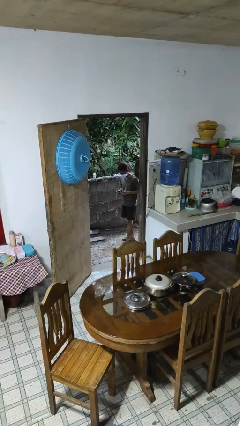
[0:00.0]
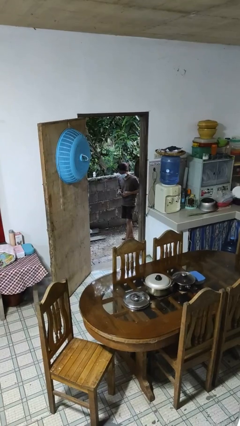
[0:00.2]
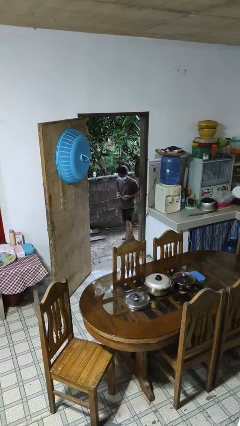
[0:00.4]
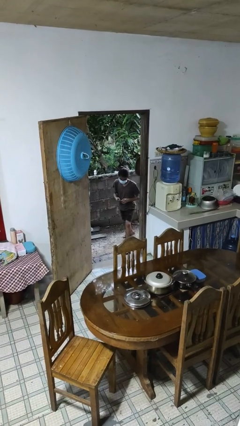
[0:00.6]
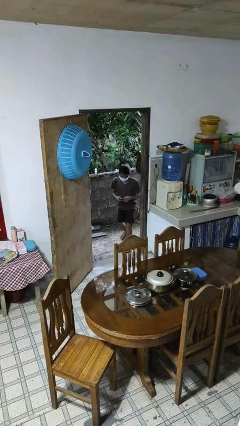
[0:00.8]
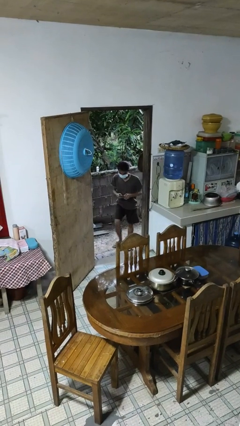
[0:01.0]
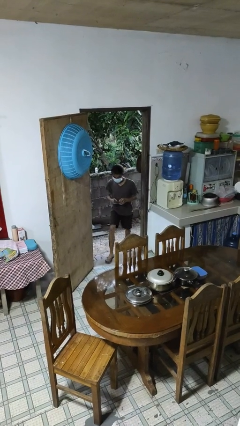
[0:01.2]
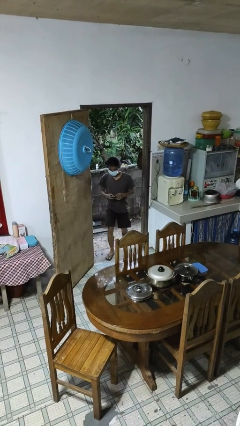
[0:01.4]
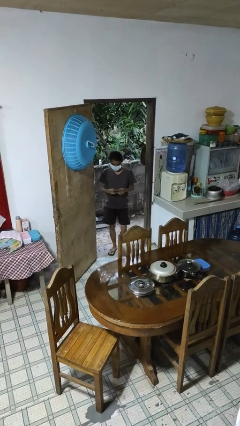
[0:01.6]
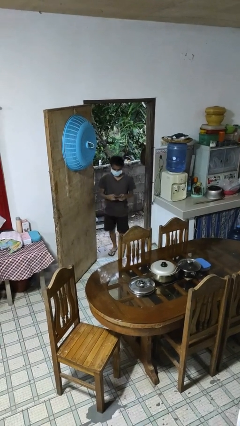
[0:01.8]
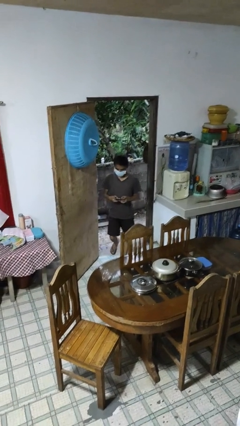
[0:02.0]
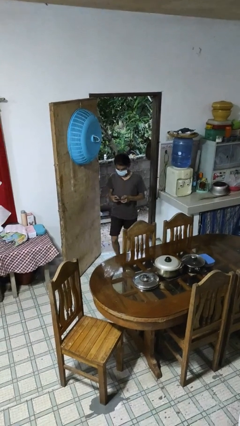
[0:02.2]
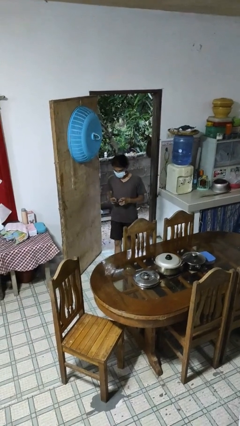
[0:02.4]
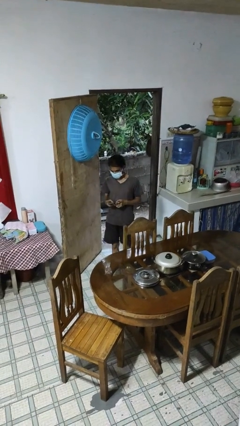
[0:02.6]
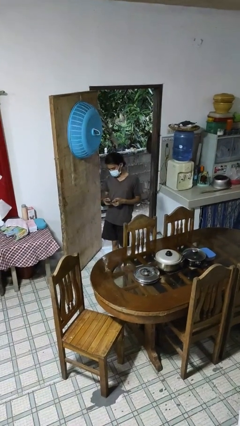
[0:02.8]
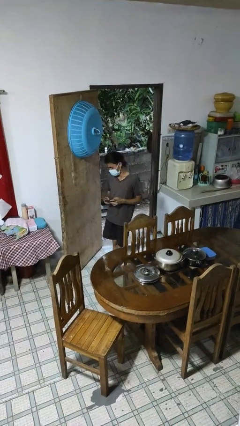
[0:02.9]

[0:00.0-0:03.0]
person enters scene through structure

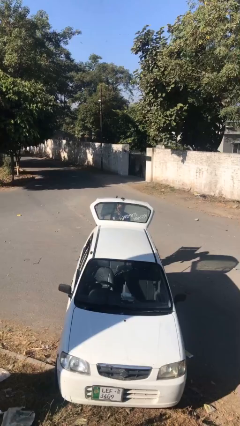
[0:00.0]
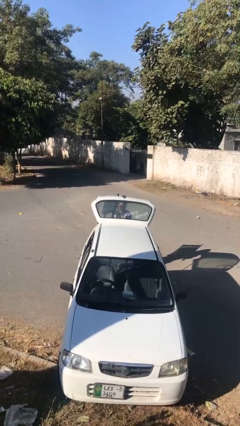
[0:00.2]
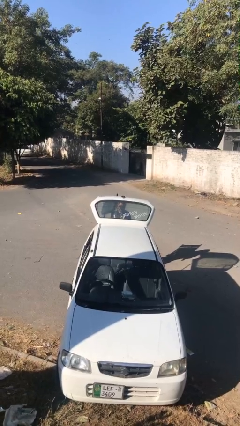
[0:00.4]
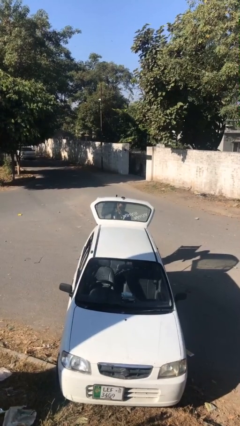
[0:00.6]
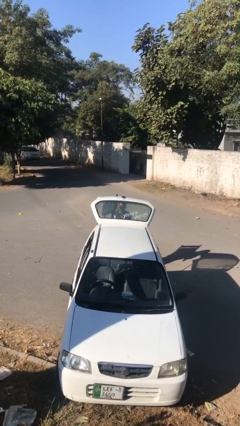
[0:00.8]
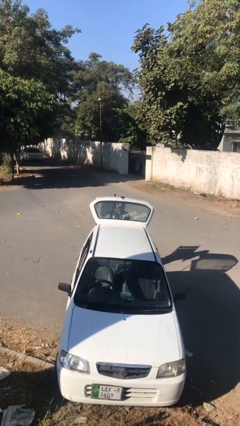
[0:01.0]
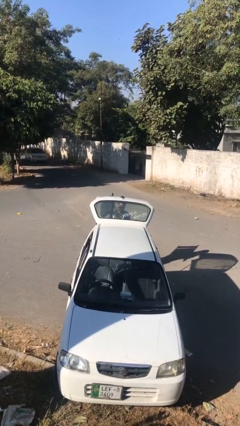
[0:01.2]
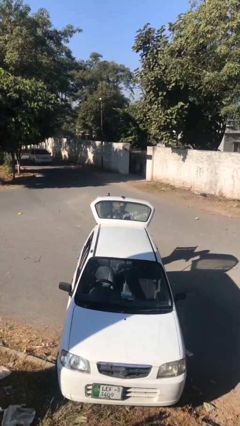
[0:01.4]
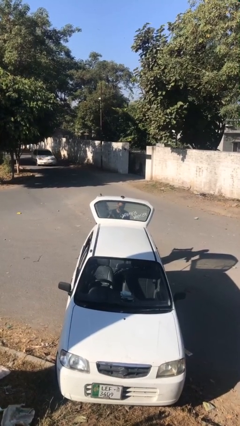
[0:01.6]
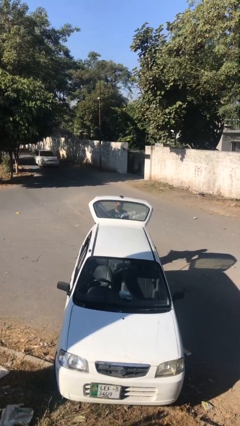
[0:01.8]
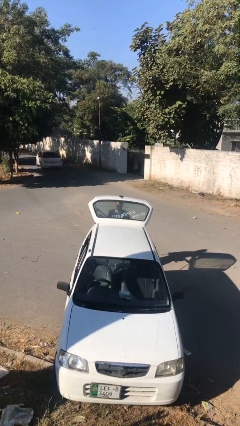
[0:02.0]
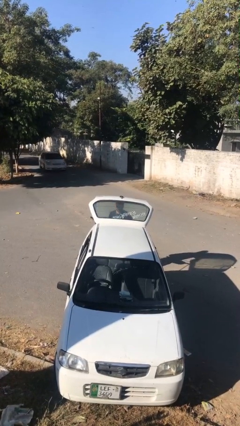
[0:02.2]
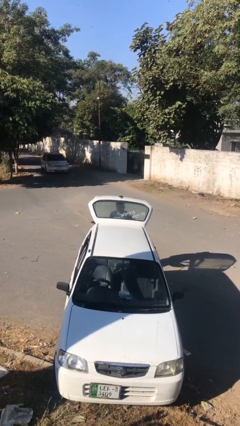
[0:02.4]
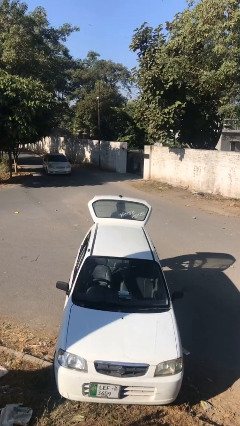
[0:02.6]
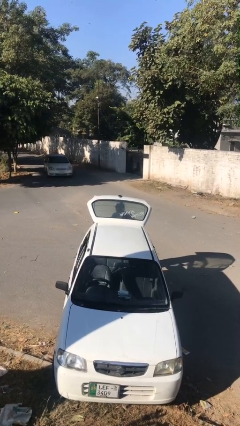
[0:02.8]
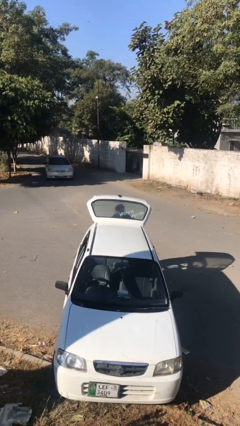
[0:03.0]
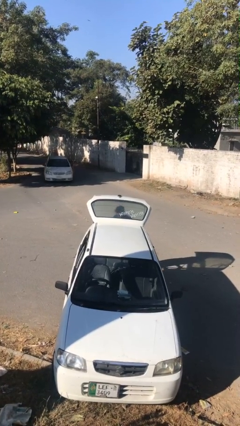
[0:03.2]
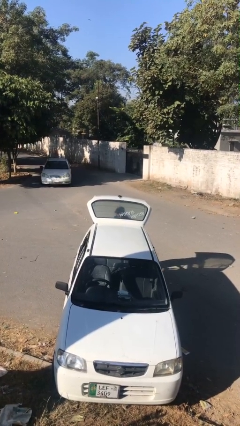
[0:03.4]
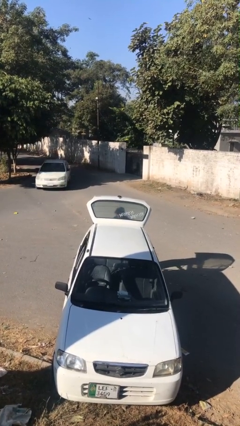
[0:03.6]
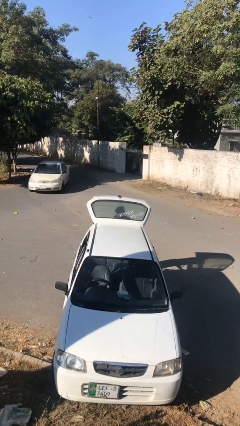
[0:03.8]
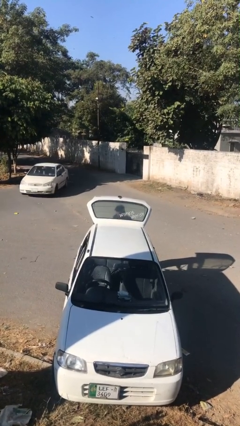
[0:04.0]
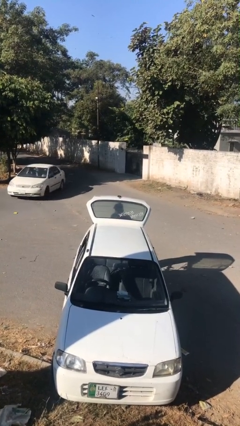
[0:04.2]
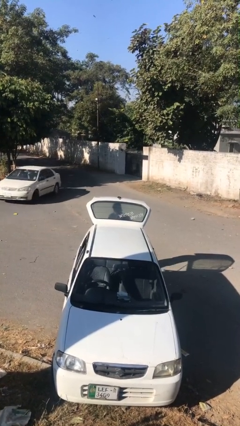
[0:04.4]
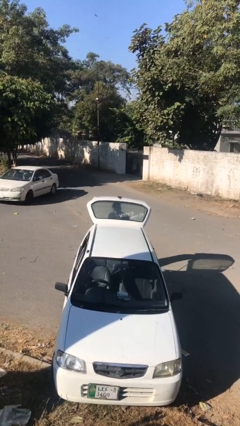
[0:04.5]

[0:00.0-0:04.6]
person loads car

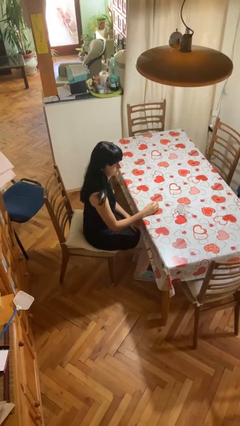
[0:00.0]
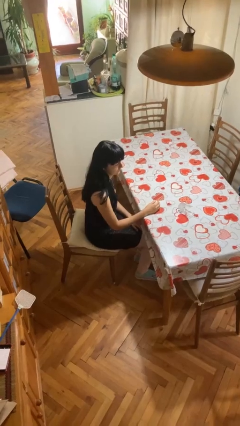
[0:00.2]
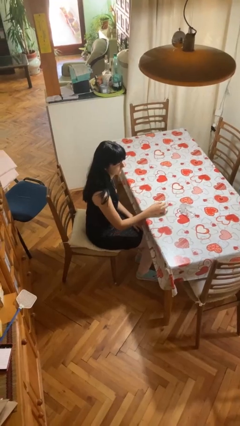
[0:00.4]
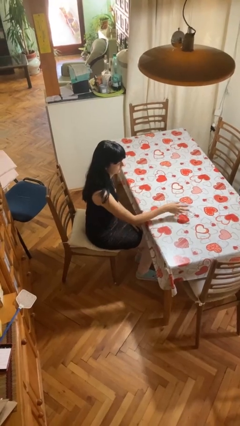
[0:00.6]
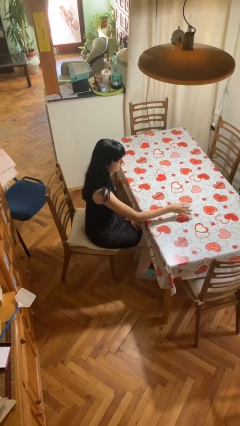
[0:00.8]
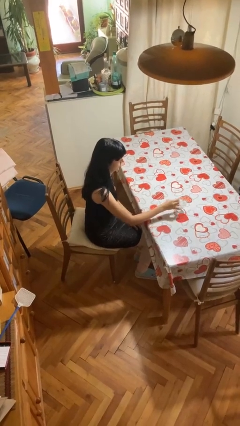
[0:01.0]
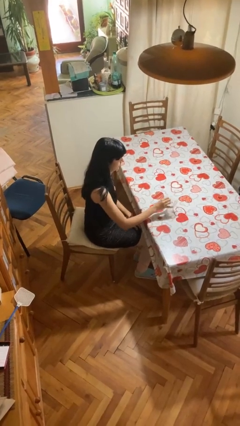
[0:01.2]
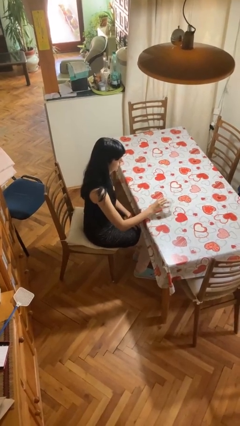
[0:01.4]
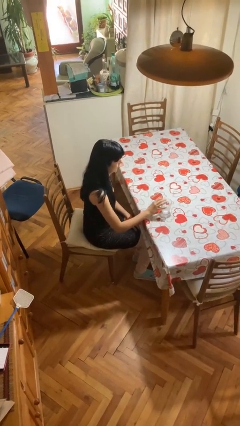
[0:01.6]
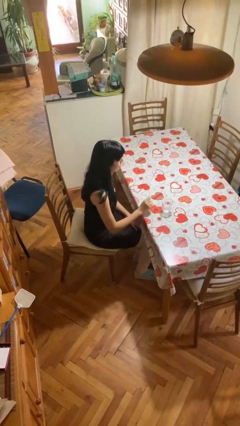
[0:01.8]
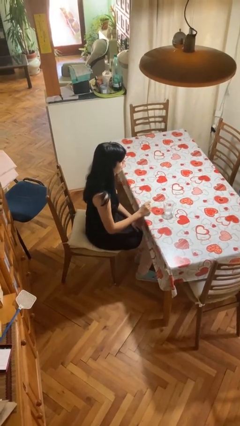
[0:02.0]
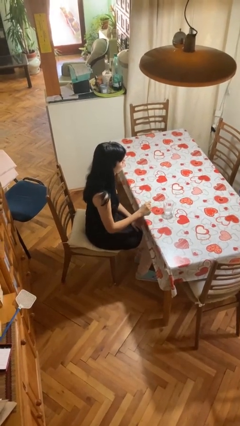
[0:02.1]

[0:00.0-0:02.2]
person sets upright glass

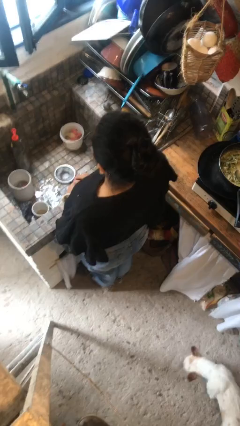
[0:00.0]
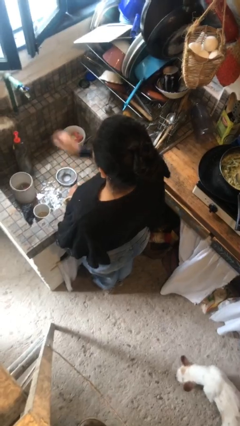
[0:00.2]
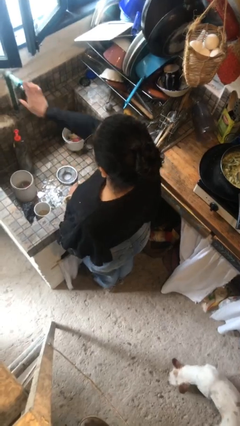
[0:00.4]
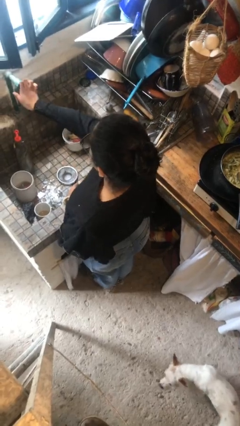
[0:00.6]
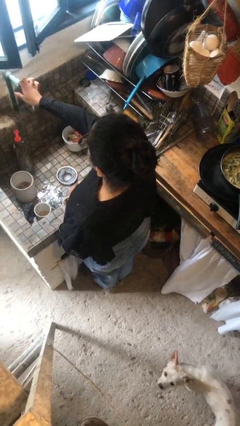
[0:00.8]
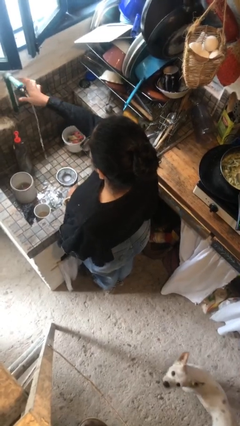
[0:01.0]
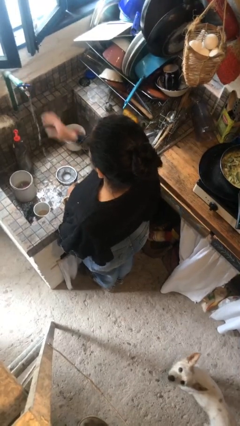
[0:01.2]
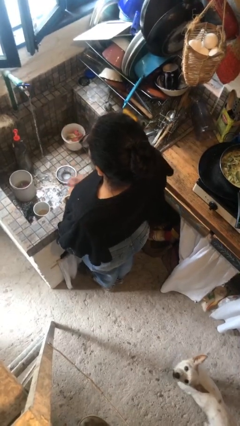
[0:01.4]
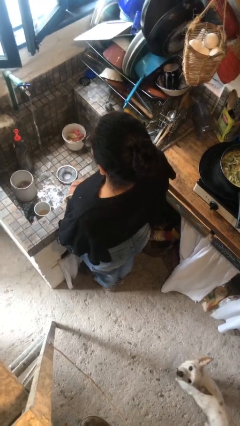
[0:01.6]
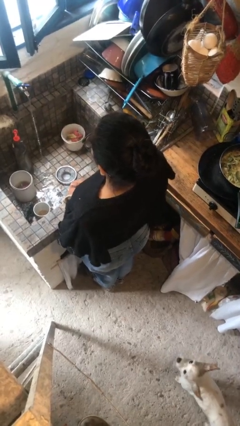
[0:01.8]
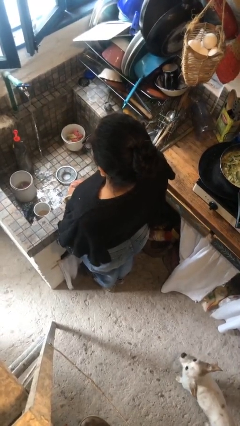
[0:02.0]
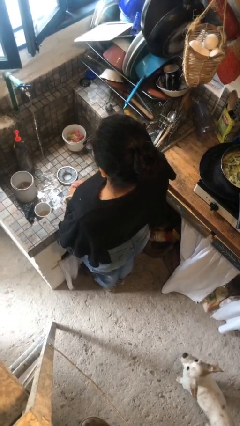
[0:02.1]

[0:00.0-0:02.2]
person turns on faucet

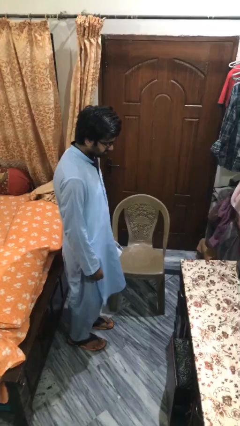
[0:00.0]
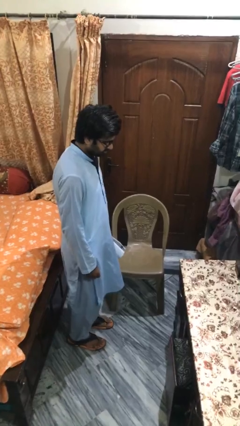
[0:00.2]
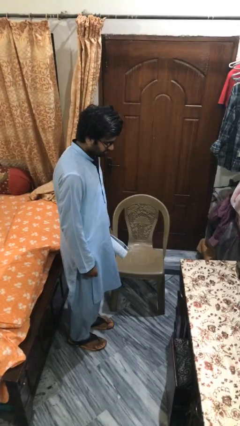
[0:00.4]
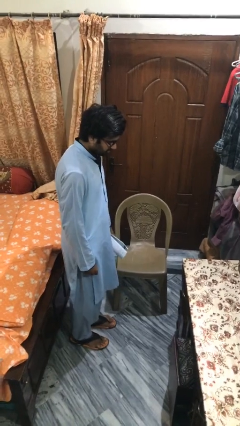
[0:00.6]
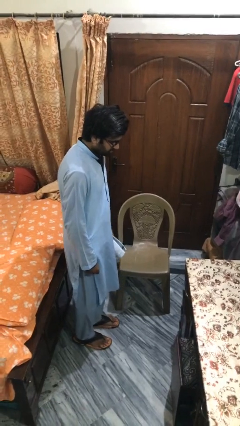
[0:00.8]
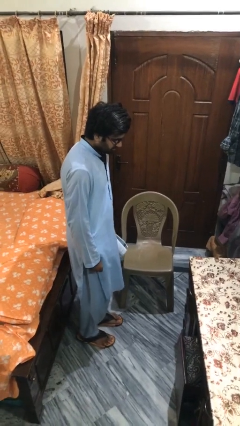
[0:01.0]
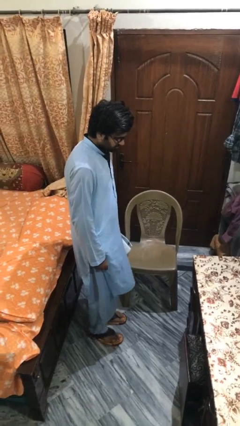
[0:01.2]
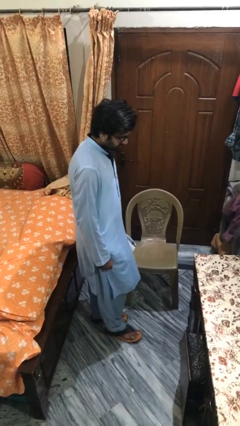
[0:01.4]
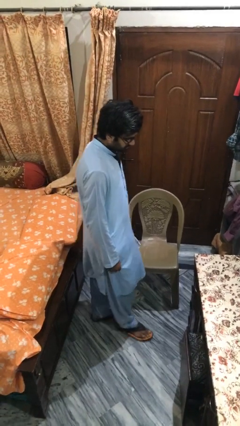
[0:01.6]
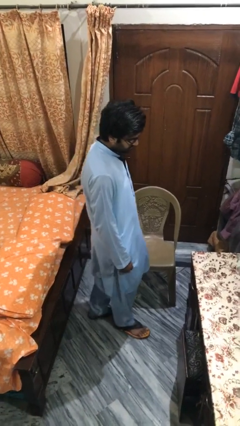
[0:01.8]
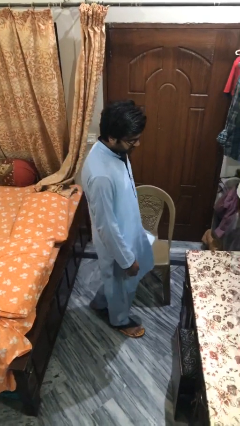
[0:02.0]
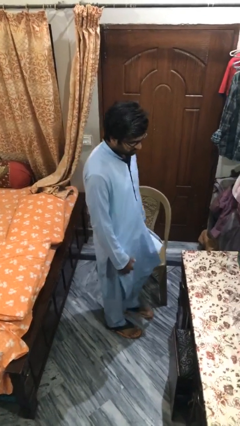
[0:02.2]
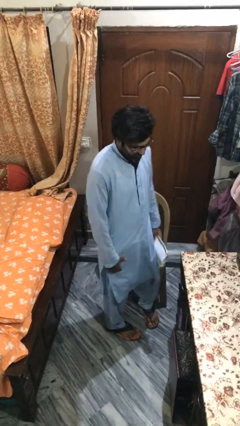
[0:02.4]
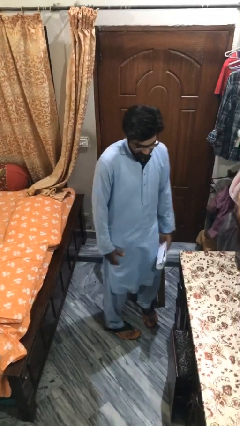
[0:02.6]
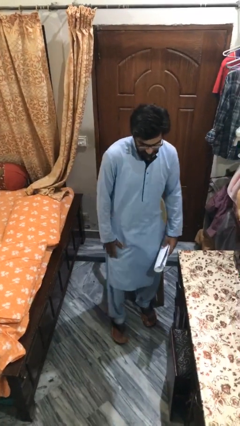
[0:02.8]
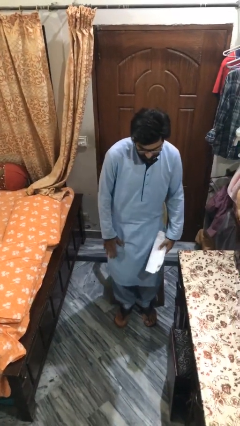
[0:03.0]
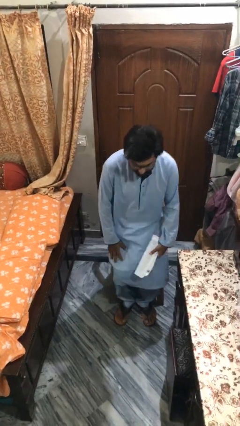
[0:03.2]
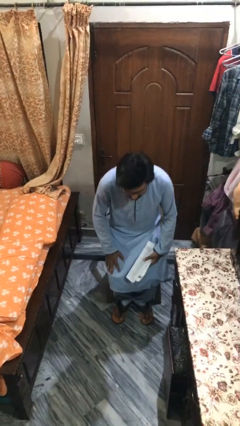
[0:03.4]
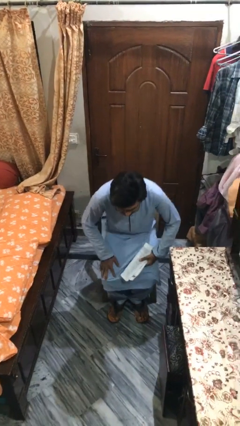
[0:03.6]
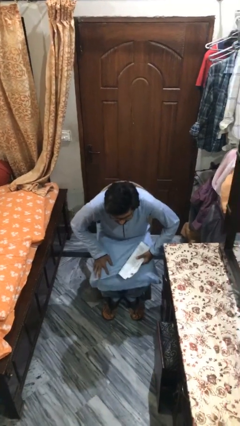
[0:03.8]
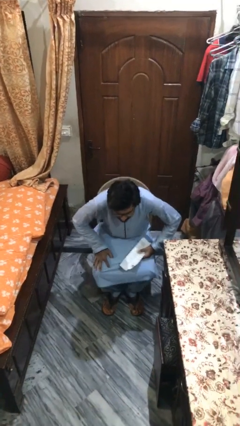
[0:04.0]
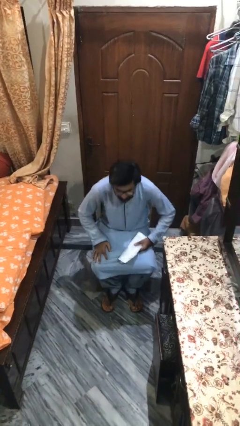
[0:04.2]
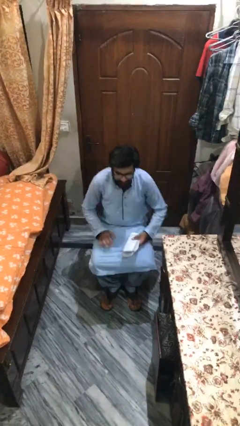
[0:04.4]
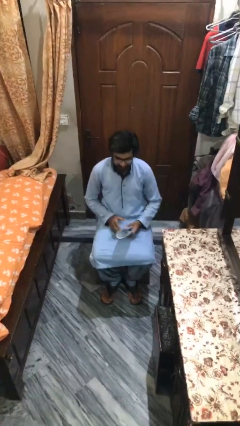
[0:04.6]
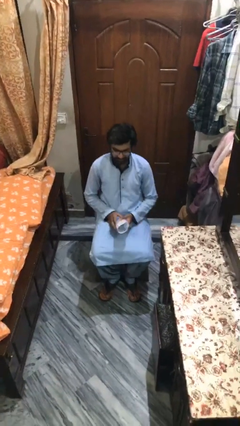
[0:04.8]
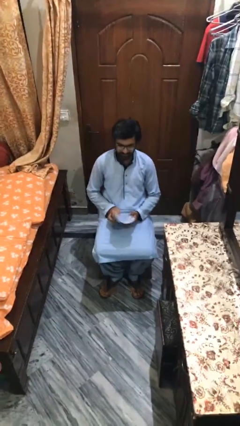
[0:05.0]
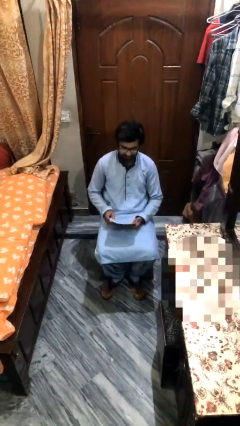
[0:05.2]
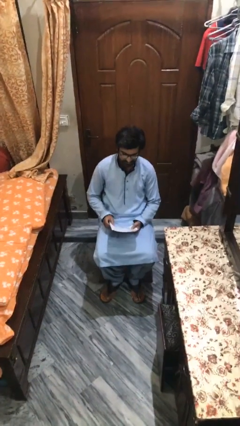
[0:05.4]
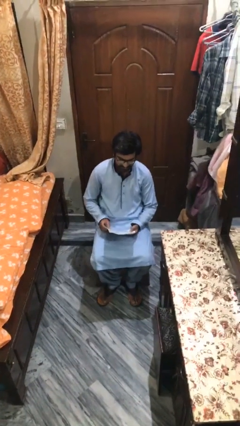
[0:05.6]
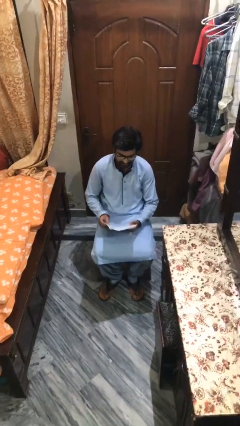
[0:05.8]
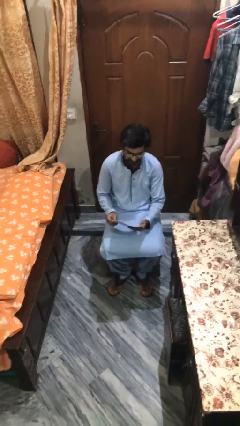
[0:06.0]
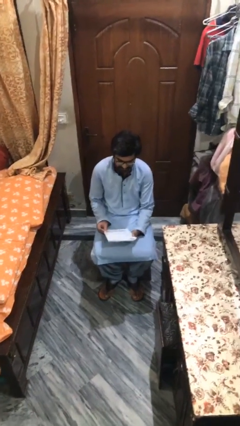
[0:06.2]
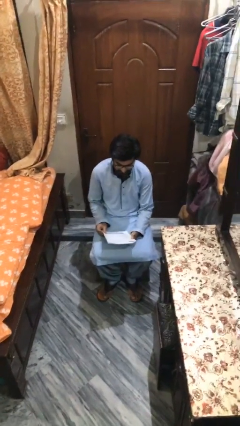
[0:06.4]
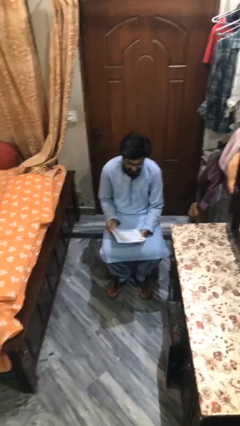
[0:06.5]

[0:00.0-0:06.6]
person sits down
